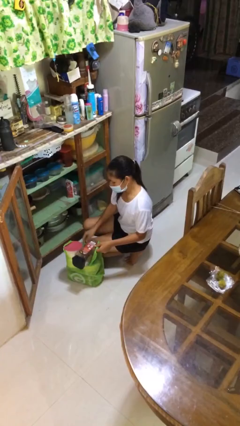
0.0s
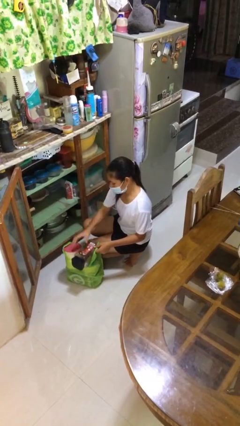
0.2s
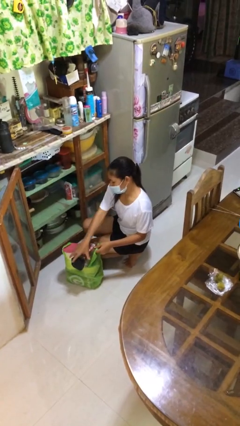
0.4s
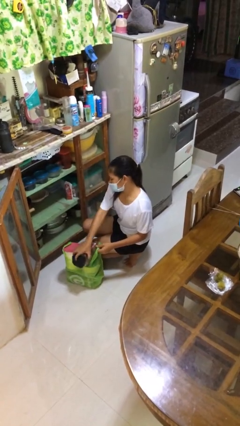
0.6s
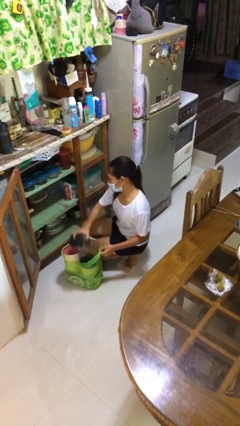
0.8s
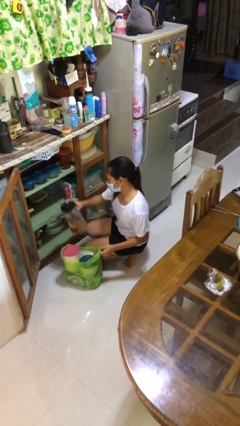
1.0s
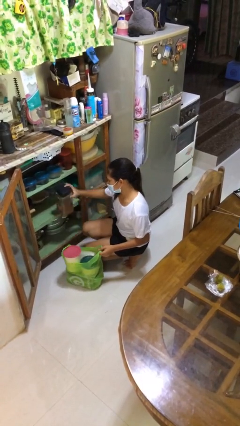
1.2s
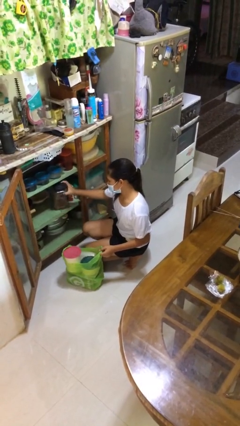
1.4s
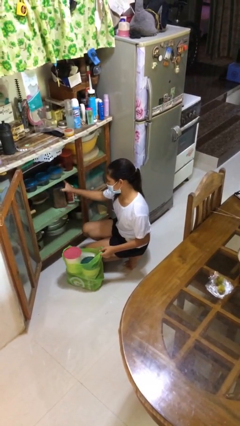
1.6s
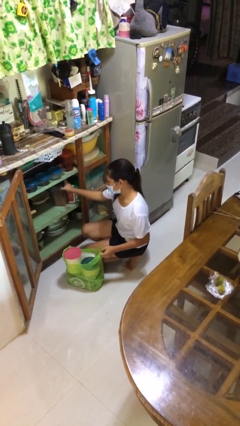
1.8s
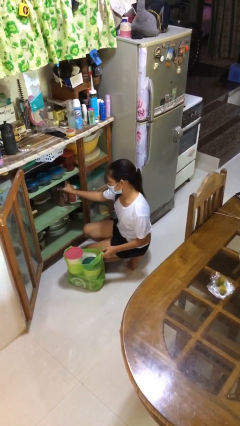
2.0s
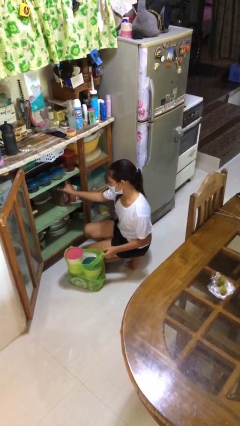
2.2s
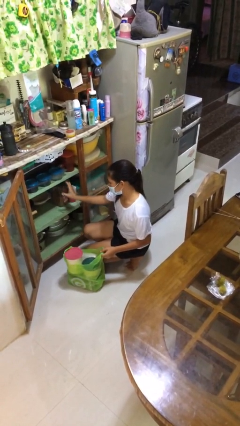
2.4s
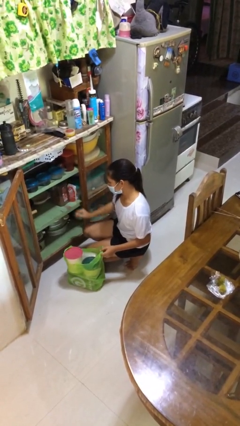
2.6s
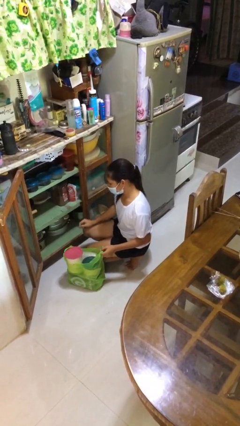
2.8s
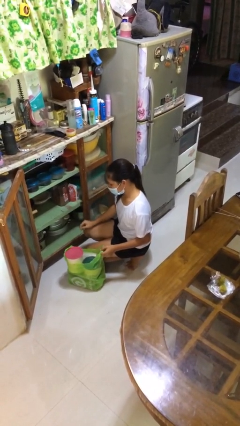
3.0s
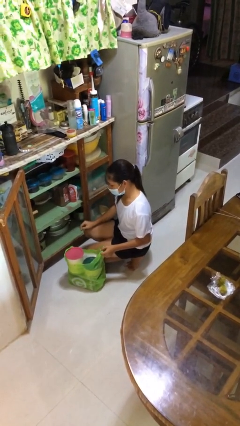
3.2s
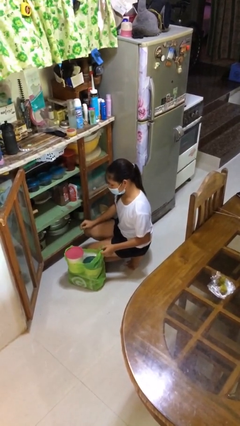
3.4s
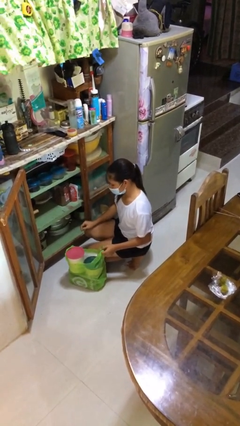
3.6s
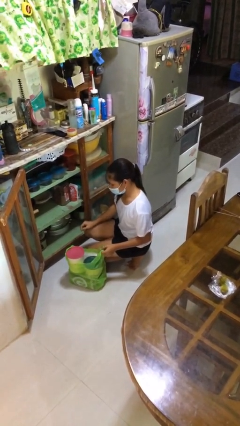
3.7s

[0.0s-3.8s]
person loads groceries into cabinet

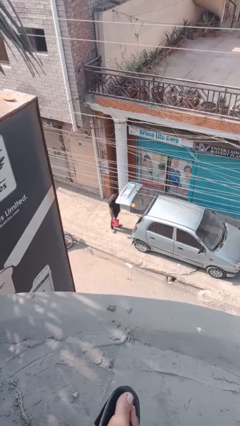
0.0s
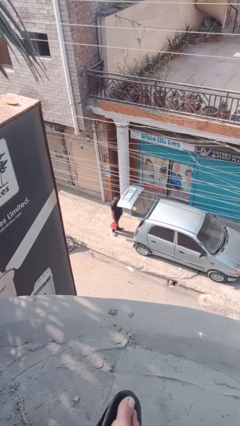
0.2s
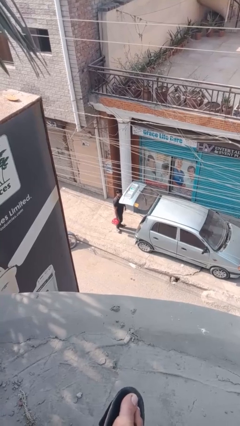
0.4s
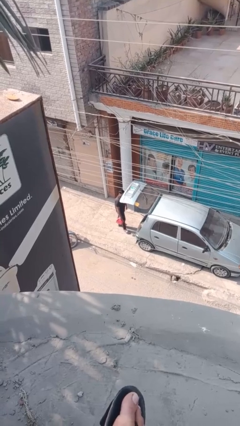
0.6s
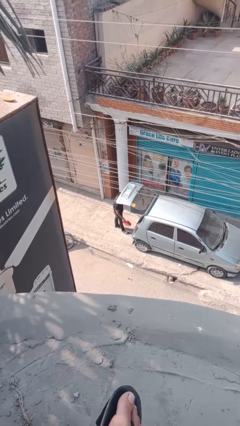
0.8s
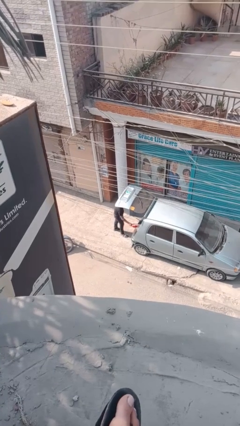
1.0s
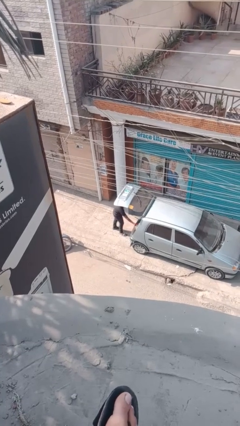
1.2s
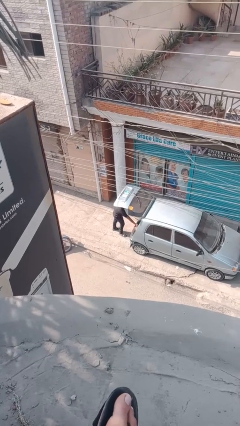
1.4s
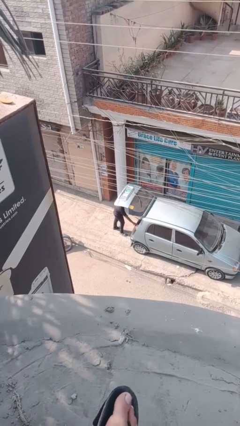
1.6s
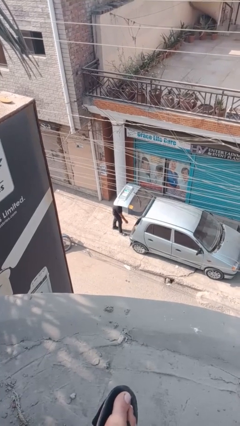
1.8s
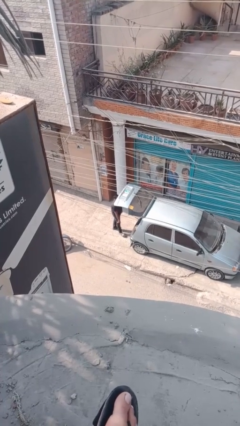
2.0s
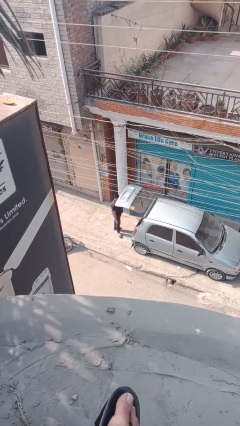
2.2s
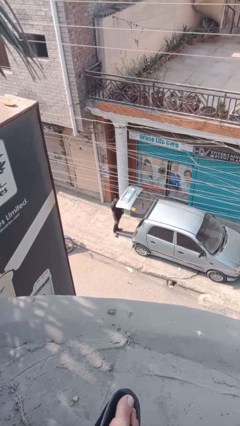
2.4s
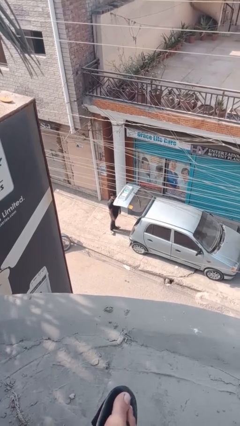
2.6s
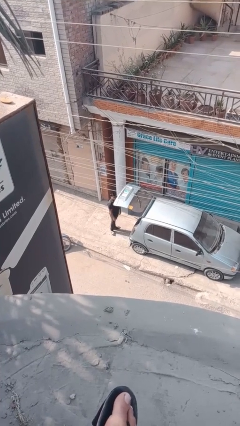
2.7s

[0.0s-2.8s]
person loads car

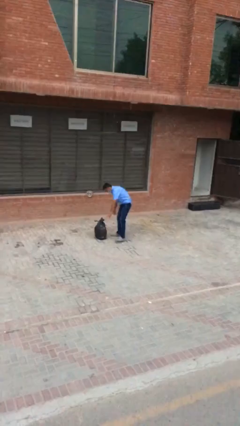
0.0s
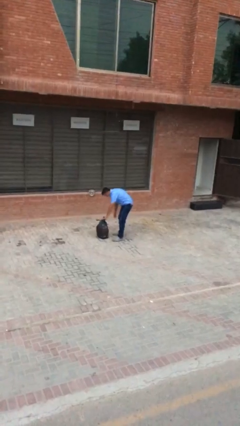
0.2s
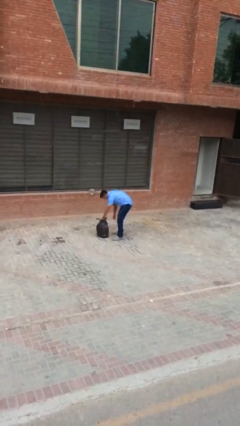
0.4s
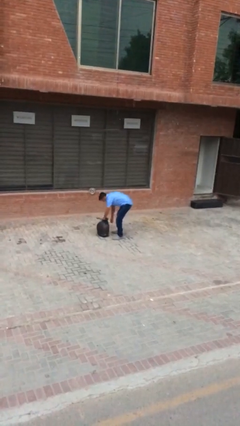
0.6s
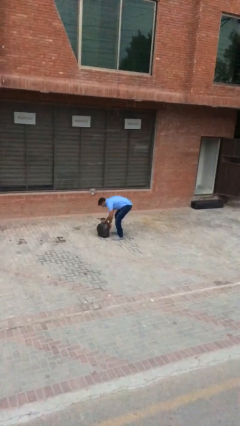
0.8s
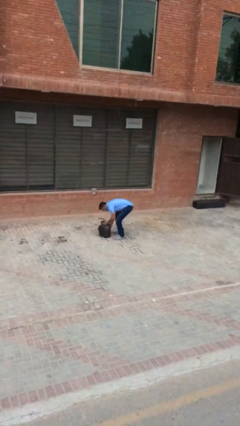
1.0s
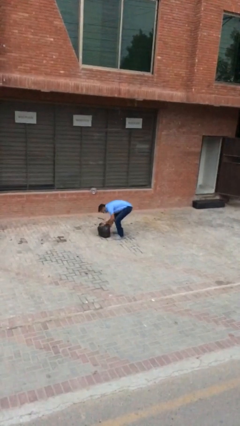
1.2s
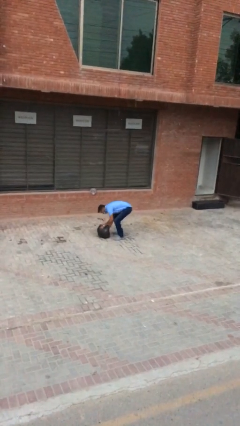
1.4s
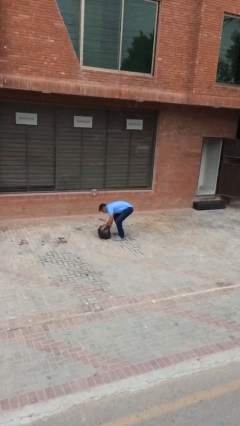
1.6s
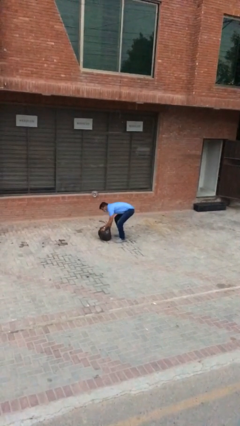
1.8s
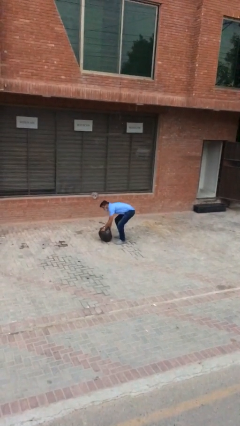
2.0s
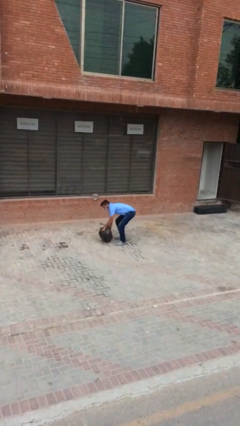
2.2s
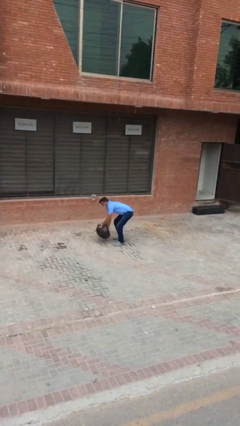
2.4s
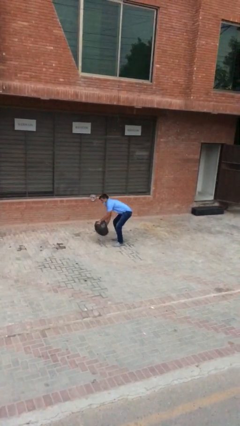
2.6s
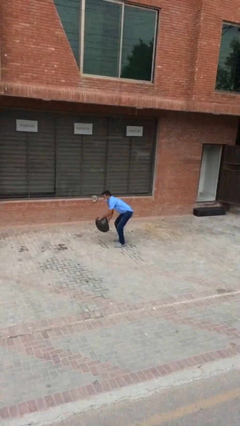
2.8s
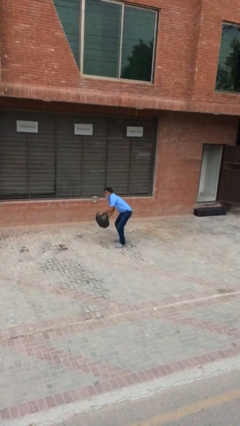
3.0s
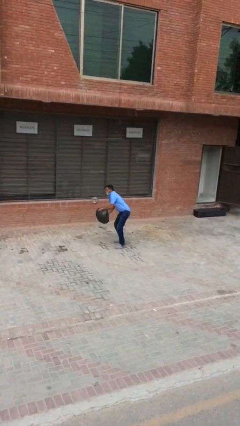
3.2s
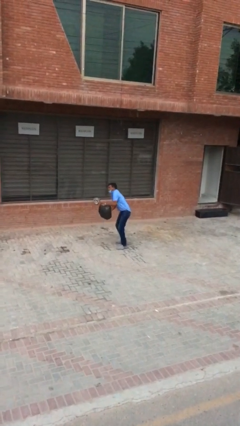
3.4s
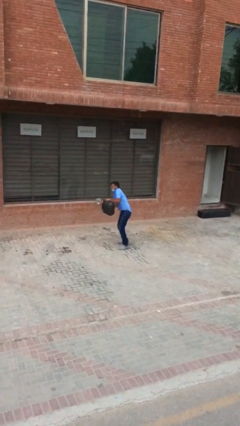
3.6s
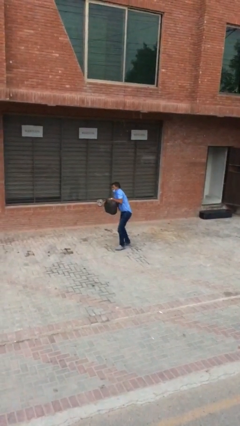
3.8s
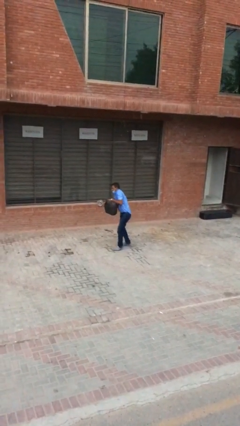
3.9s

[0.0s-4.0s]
person picks up object from floor

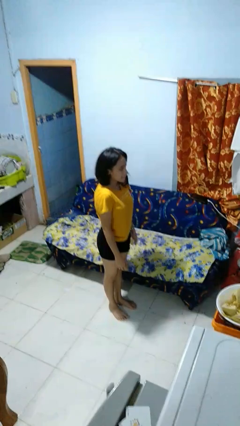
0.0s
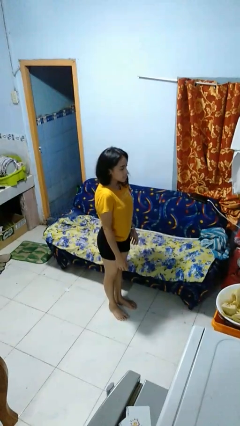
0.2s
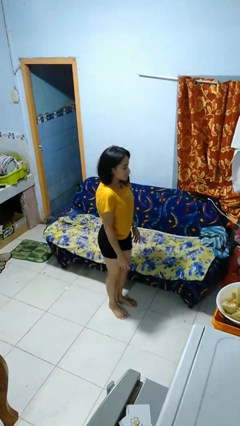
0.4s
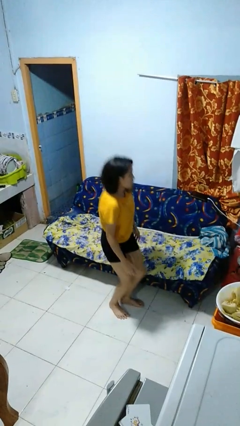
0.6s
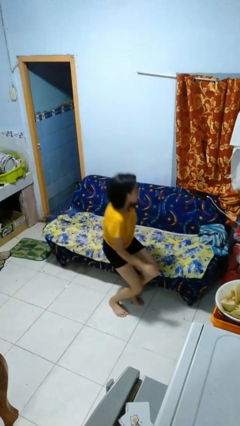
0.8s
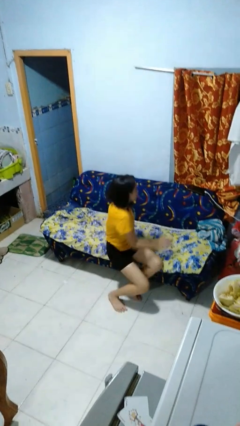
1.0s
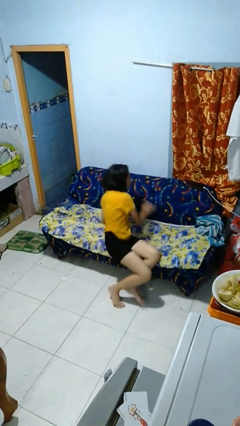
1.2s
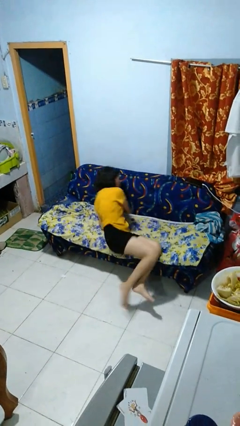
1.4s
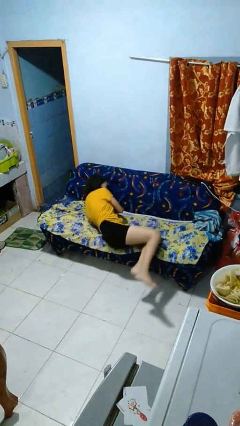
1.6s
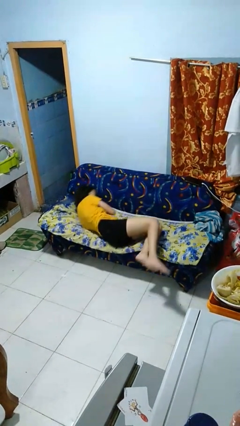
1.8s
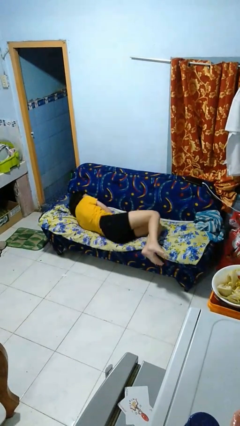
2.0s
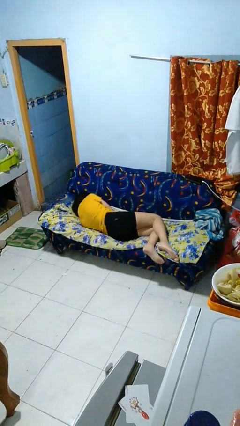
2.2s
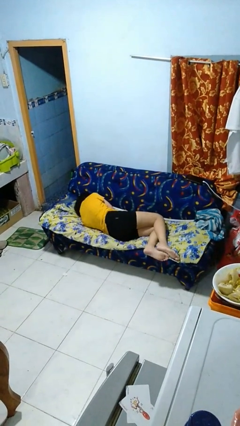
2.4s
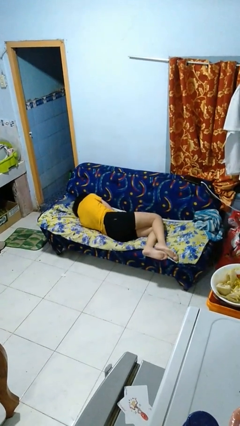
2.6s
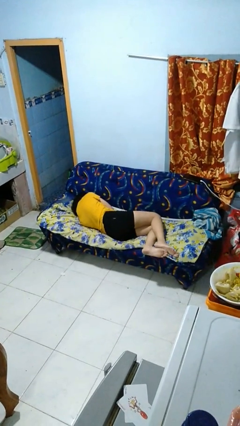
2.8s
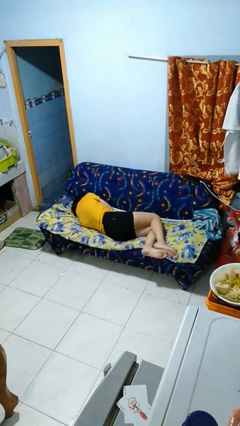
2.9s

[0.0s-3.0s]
person lies down on couch

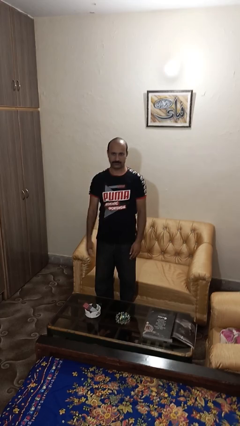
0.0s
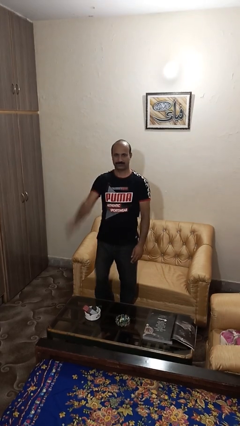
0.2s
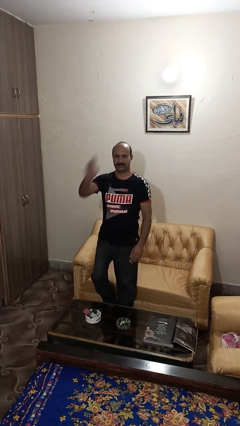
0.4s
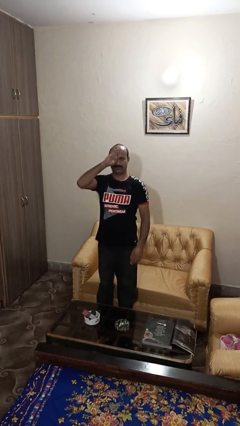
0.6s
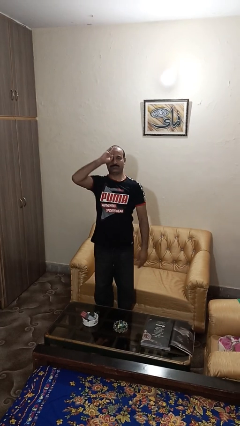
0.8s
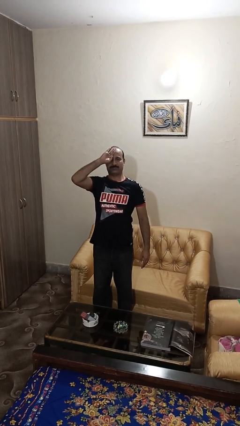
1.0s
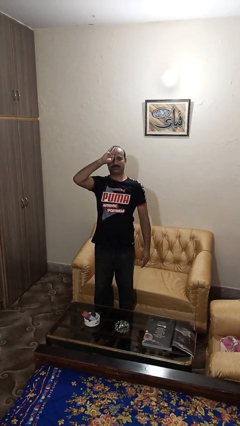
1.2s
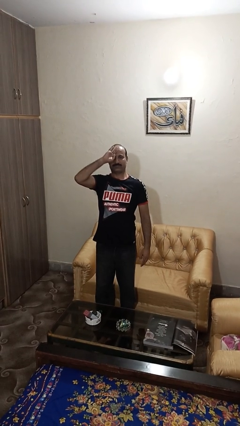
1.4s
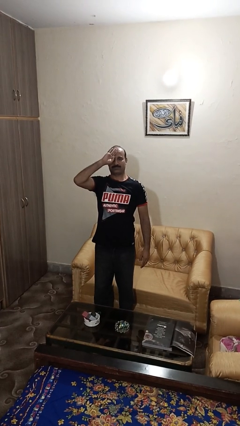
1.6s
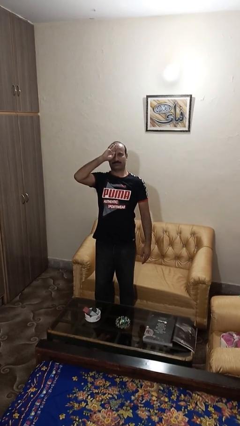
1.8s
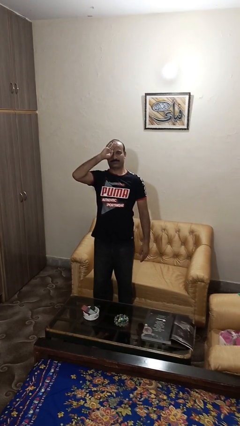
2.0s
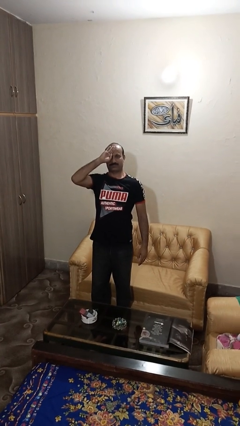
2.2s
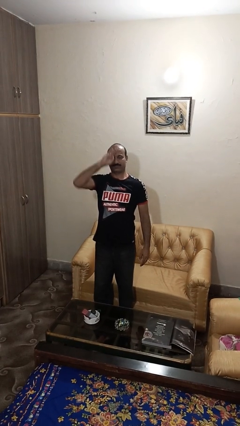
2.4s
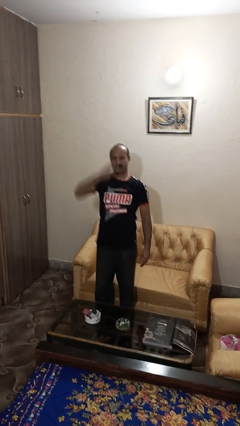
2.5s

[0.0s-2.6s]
person salutes

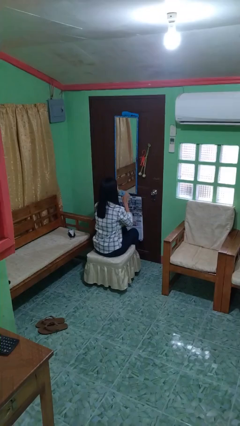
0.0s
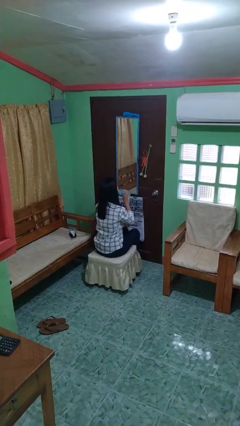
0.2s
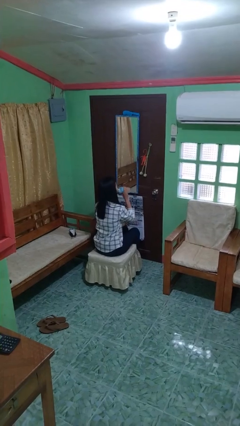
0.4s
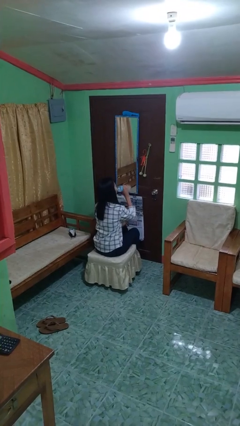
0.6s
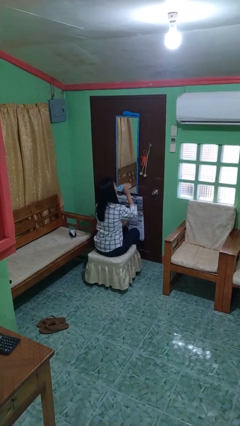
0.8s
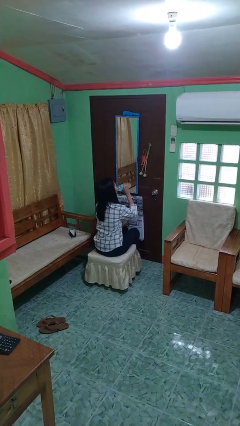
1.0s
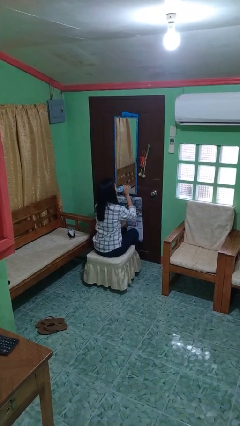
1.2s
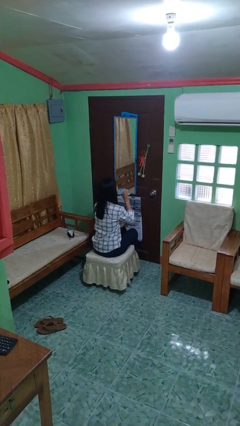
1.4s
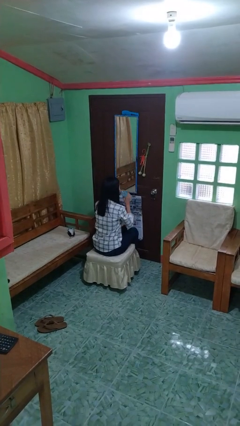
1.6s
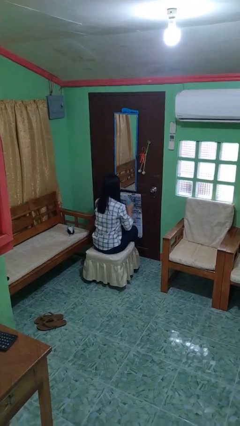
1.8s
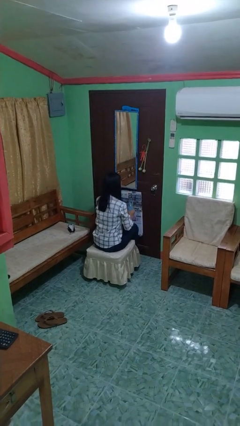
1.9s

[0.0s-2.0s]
person drinks from bottle
